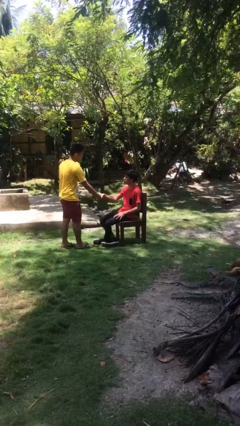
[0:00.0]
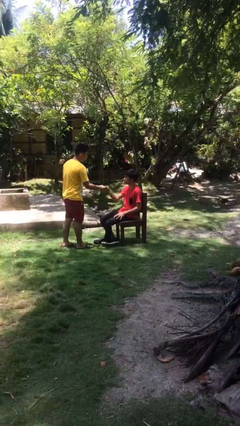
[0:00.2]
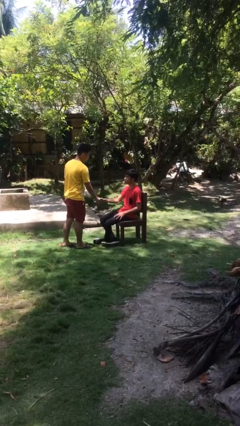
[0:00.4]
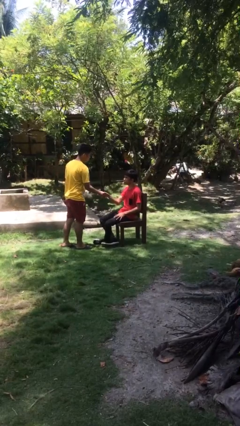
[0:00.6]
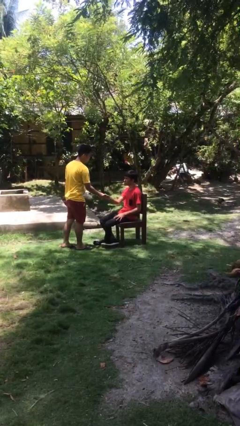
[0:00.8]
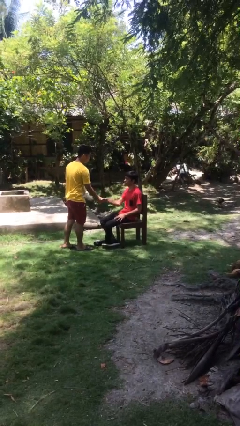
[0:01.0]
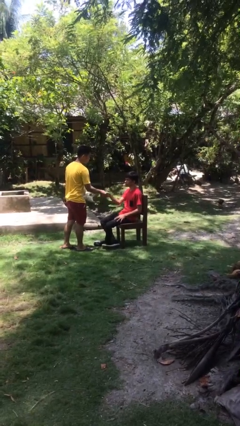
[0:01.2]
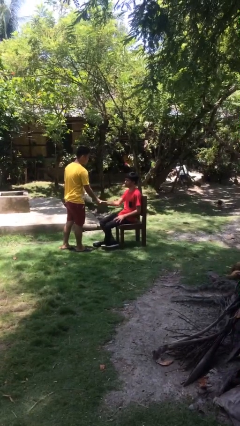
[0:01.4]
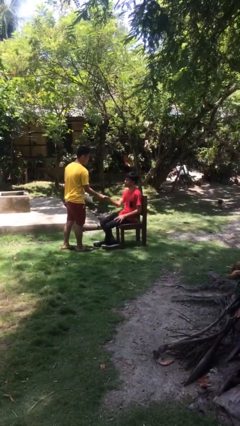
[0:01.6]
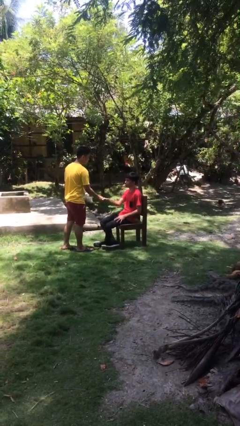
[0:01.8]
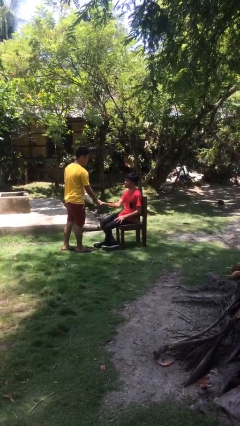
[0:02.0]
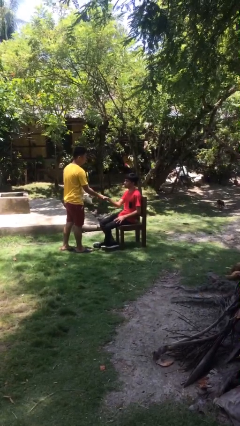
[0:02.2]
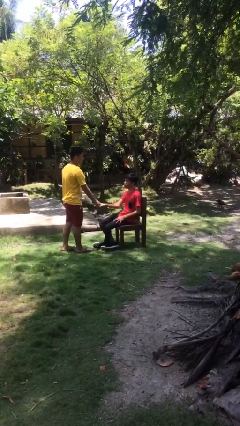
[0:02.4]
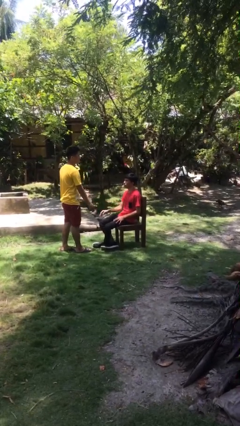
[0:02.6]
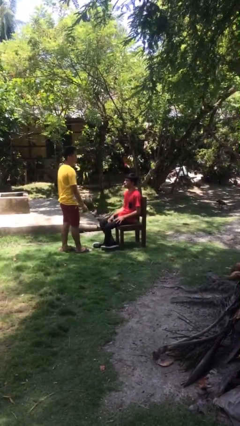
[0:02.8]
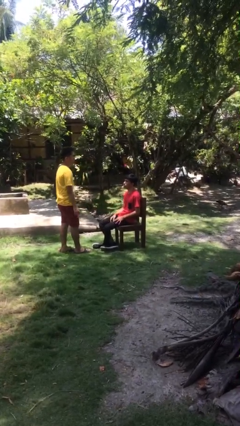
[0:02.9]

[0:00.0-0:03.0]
person shakes hand

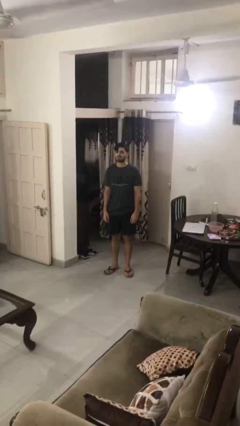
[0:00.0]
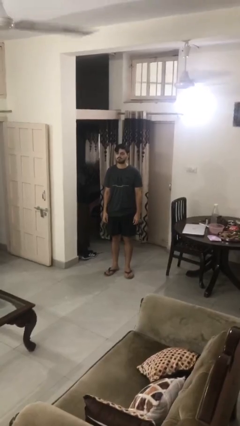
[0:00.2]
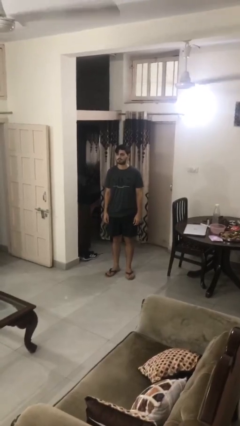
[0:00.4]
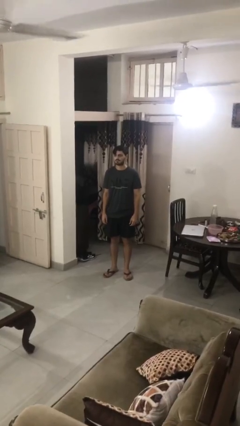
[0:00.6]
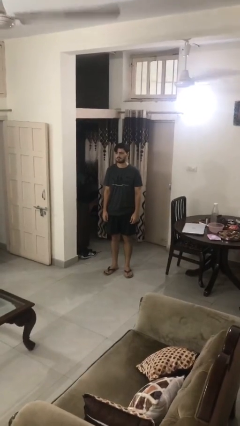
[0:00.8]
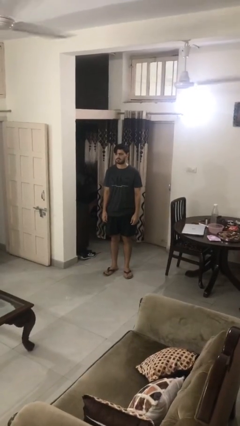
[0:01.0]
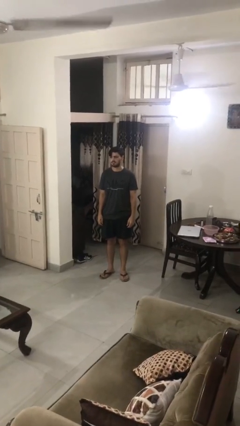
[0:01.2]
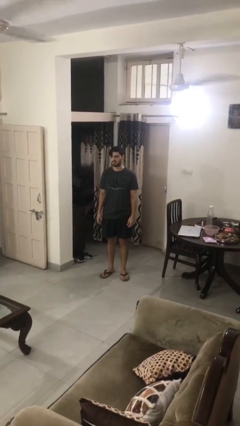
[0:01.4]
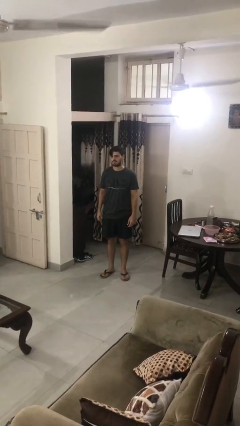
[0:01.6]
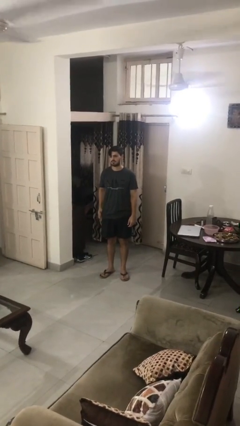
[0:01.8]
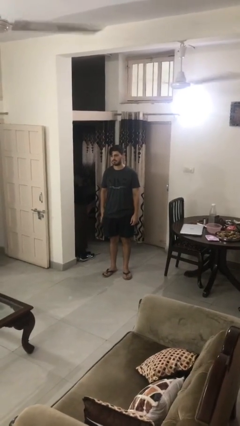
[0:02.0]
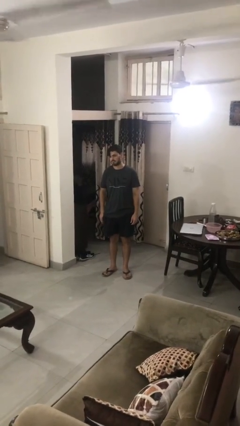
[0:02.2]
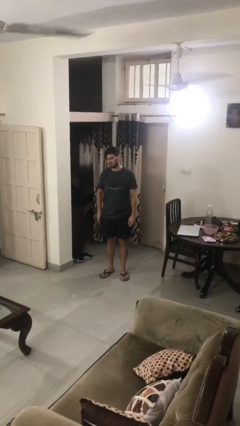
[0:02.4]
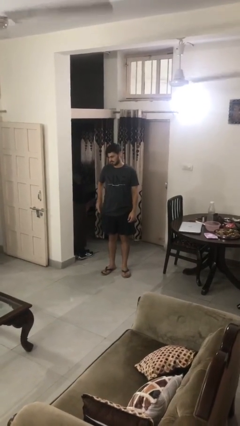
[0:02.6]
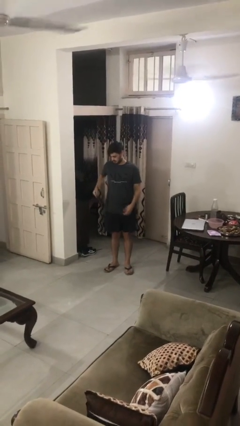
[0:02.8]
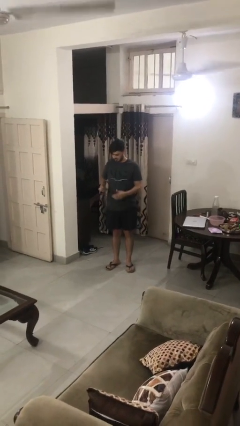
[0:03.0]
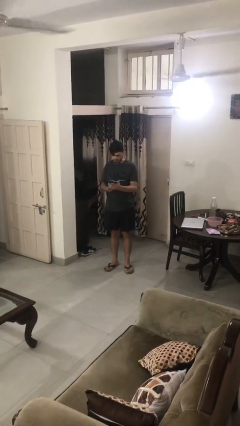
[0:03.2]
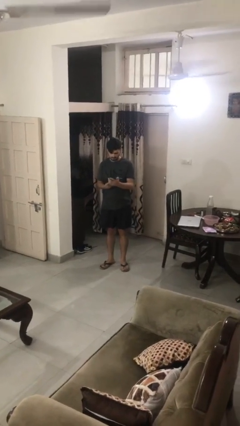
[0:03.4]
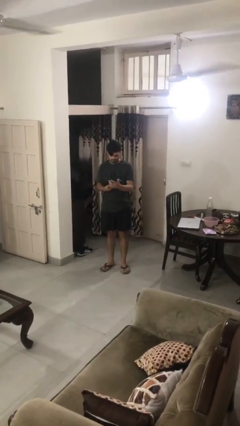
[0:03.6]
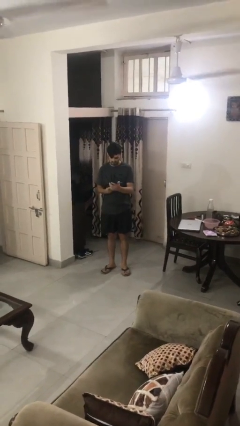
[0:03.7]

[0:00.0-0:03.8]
person takes phone from pocket

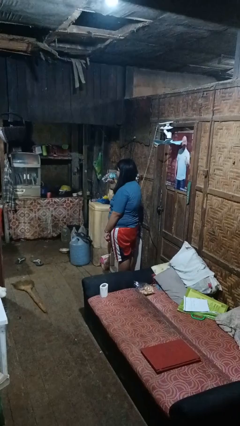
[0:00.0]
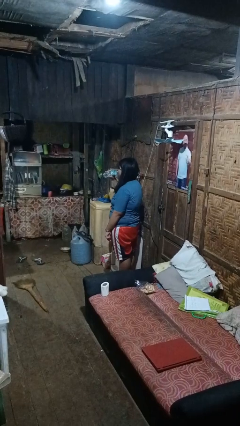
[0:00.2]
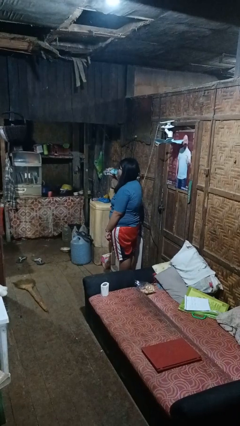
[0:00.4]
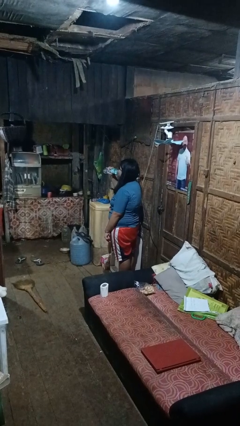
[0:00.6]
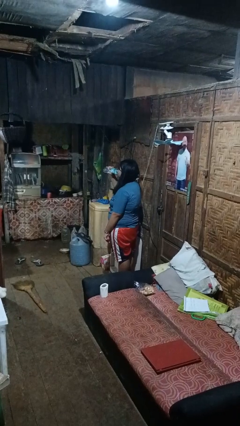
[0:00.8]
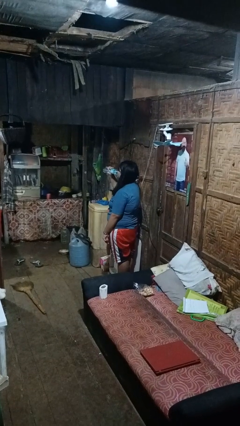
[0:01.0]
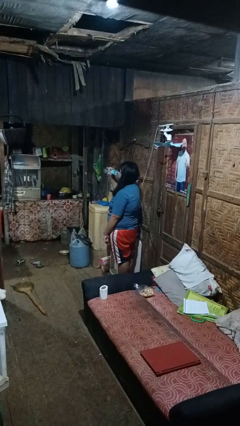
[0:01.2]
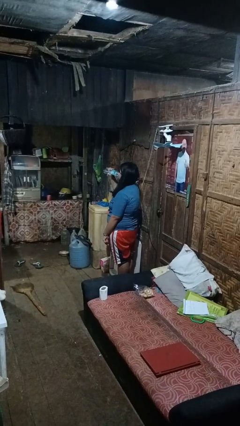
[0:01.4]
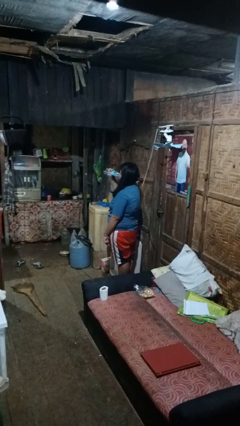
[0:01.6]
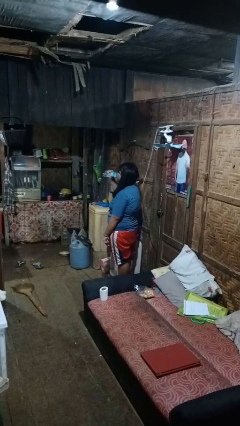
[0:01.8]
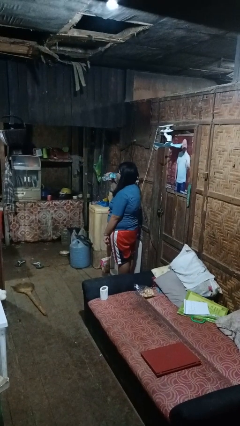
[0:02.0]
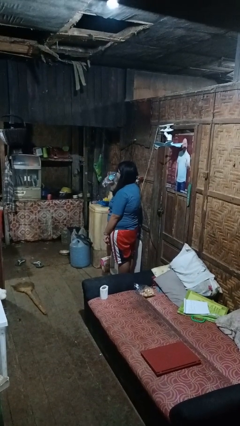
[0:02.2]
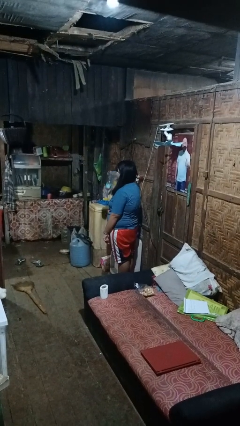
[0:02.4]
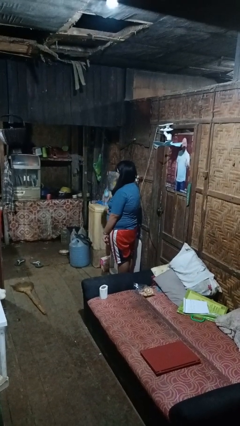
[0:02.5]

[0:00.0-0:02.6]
person drinks from bottle

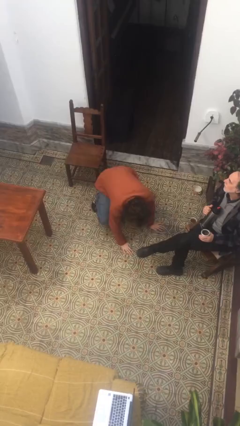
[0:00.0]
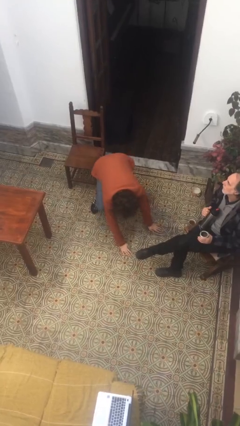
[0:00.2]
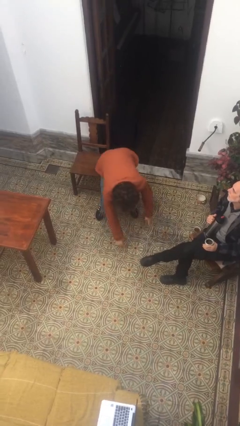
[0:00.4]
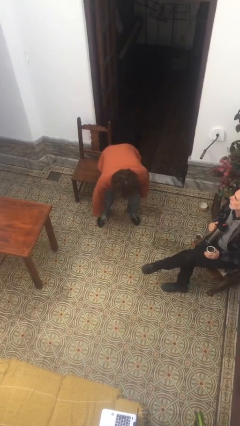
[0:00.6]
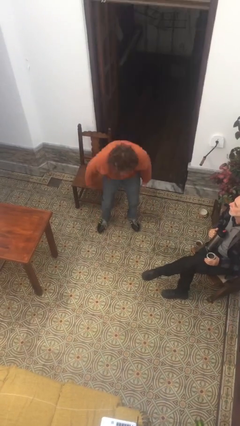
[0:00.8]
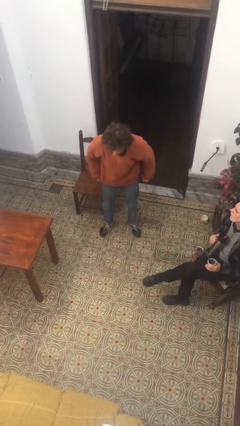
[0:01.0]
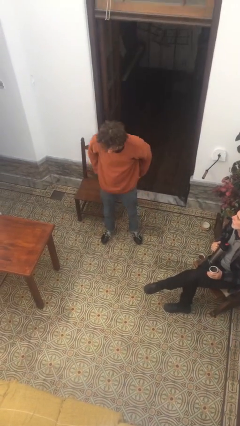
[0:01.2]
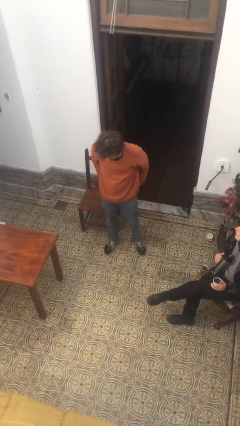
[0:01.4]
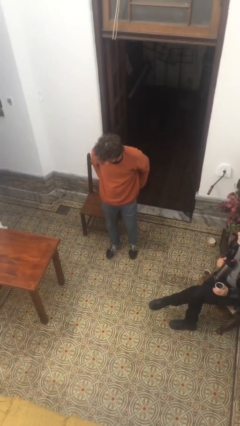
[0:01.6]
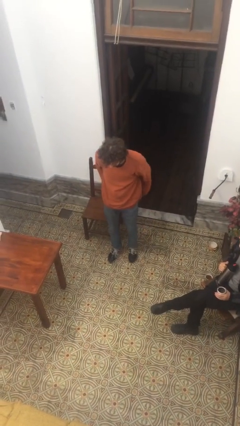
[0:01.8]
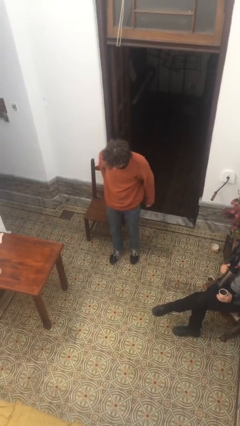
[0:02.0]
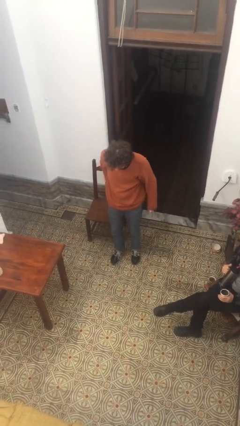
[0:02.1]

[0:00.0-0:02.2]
person stands up from floor

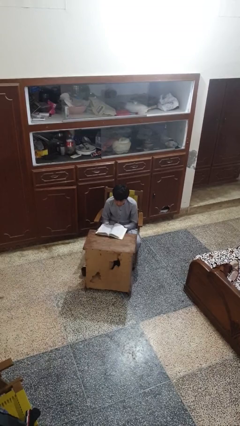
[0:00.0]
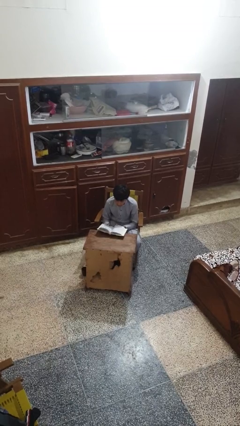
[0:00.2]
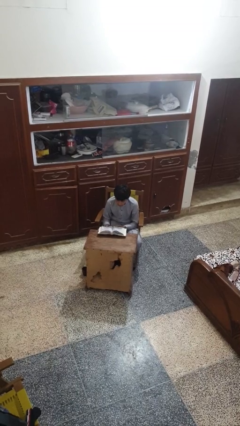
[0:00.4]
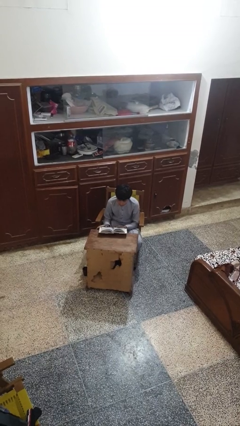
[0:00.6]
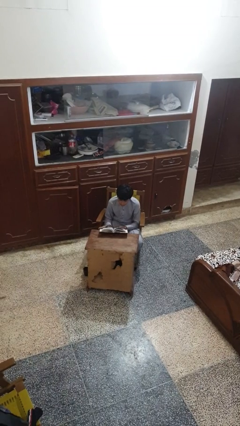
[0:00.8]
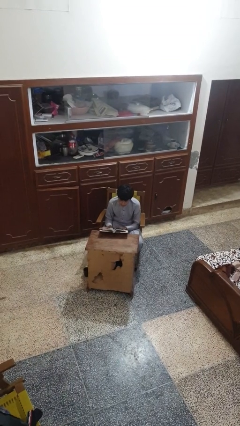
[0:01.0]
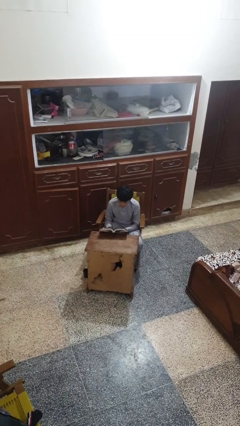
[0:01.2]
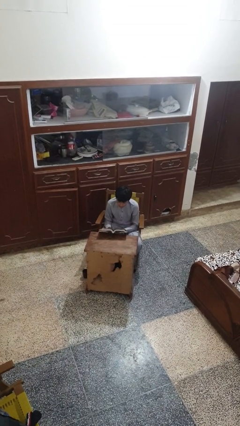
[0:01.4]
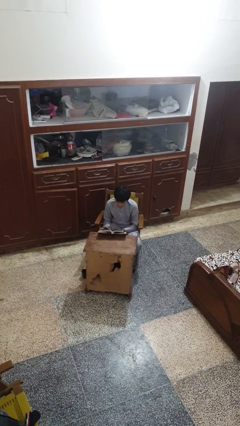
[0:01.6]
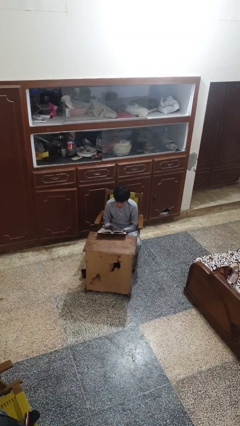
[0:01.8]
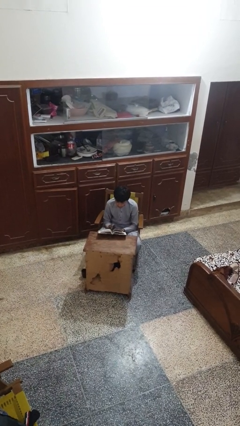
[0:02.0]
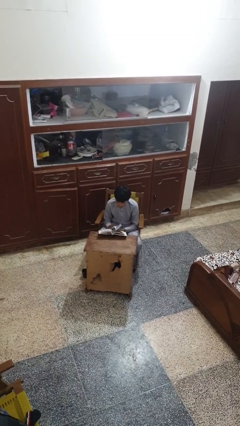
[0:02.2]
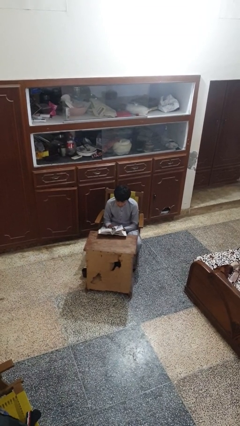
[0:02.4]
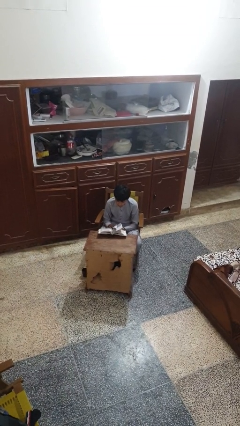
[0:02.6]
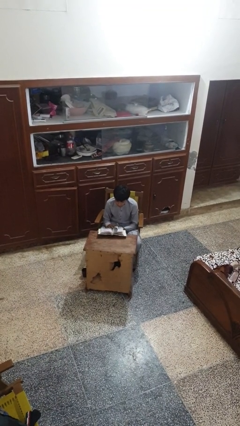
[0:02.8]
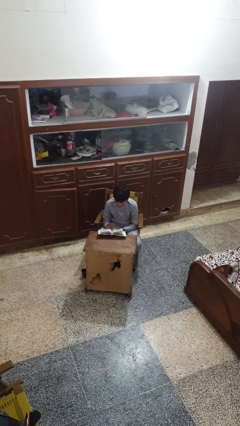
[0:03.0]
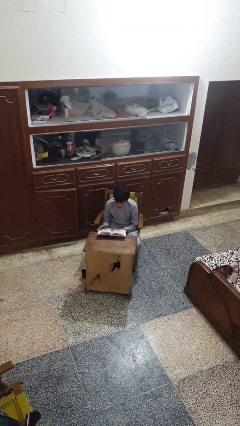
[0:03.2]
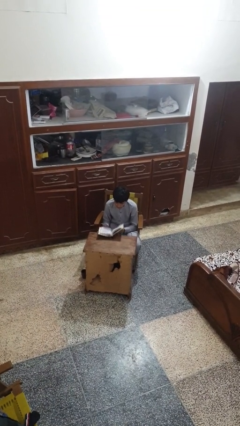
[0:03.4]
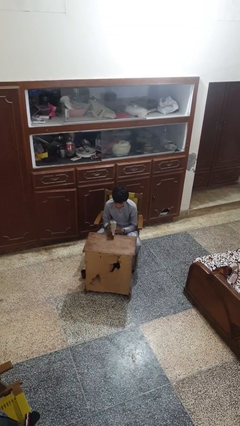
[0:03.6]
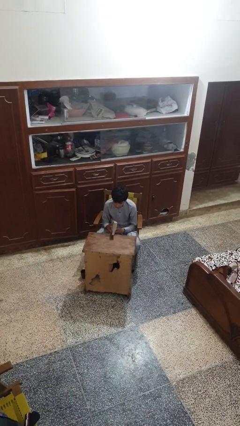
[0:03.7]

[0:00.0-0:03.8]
person reads book

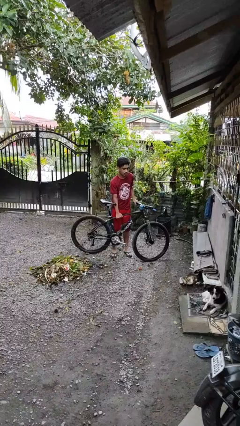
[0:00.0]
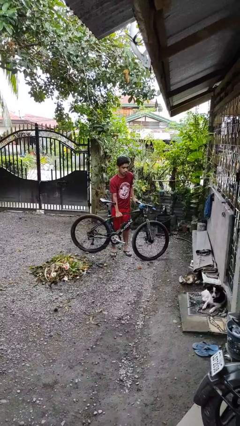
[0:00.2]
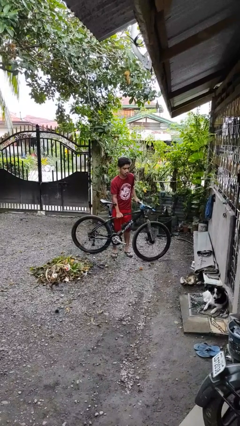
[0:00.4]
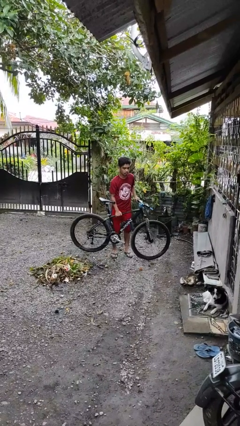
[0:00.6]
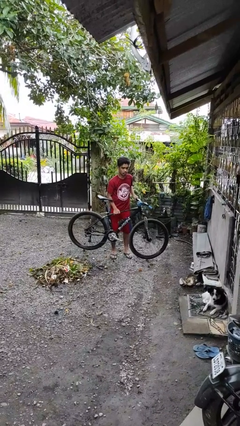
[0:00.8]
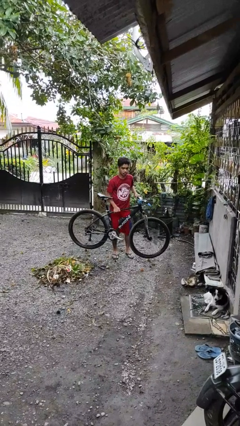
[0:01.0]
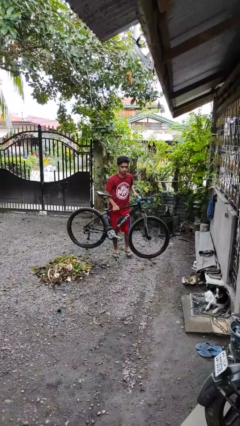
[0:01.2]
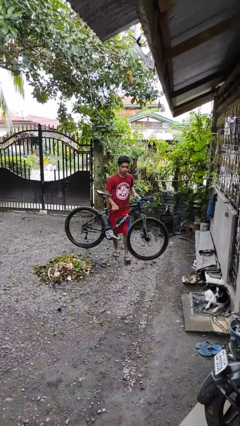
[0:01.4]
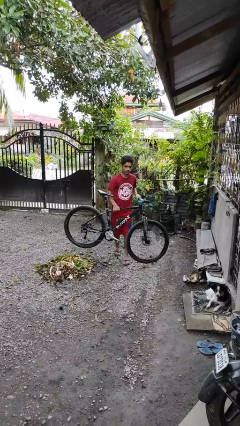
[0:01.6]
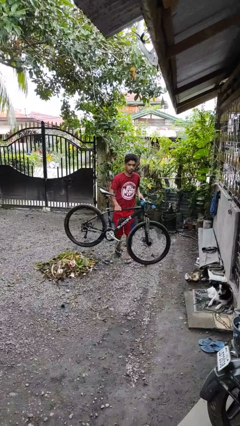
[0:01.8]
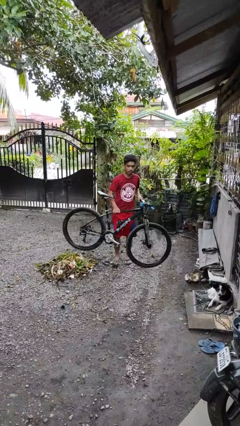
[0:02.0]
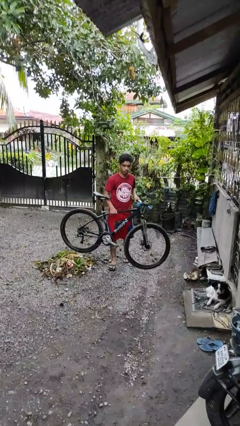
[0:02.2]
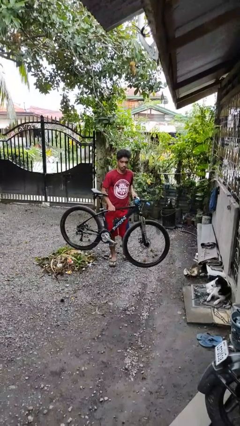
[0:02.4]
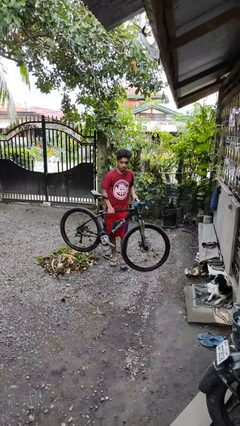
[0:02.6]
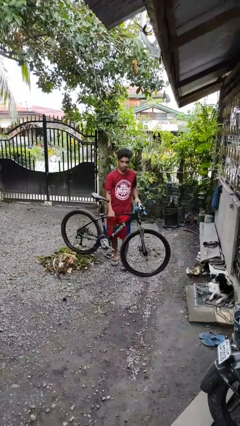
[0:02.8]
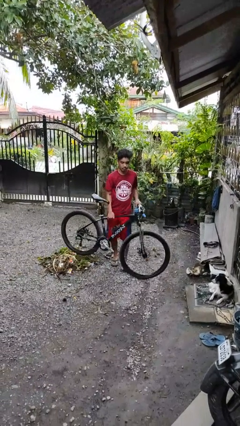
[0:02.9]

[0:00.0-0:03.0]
person carries bicycle
